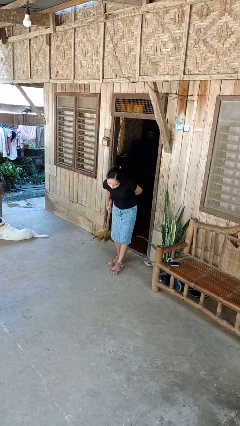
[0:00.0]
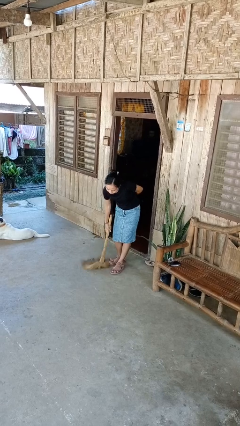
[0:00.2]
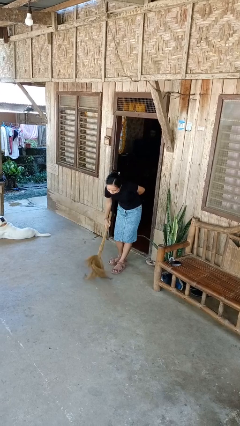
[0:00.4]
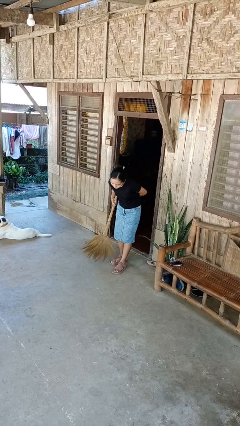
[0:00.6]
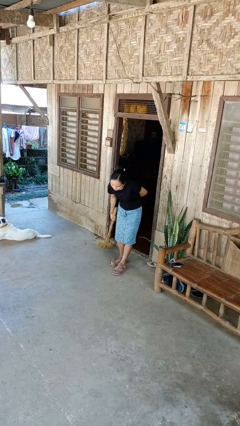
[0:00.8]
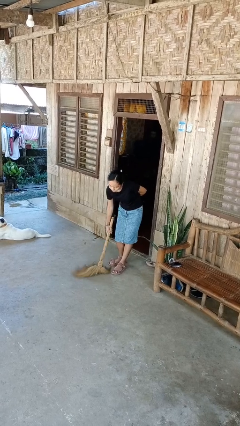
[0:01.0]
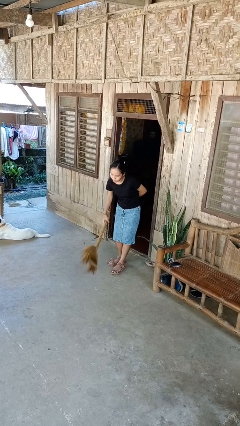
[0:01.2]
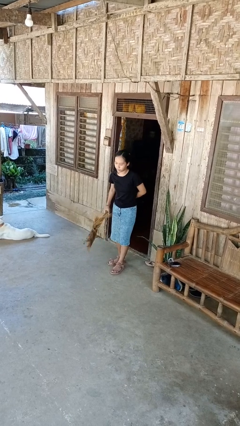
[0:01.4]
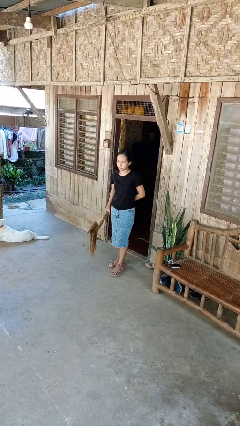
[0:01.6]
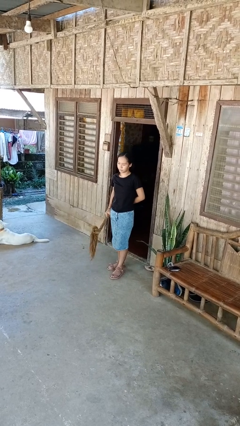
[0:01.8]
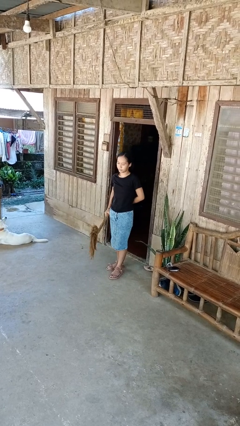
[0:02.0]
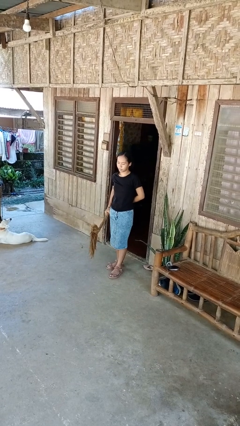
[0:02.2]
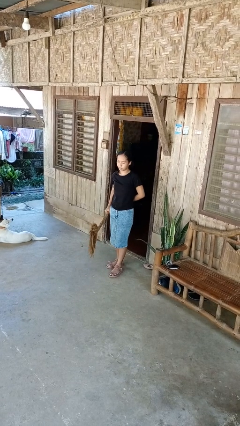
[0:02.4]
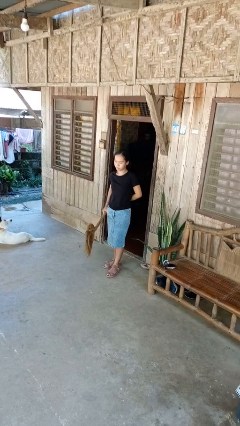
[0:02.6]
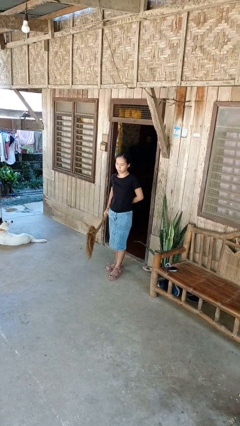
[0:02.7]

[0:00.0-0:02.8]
person sweeps floor

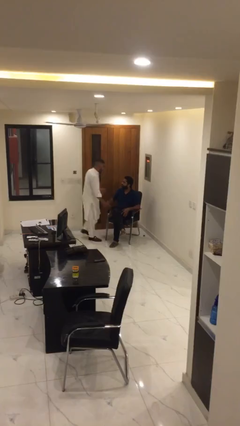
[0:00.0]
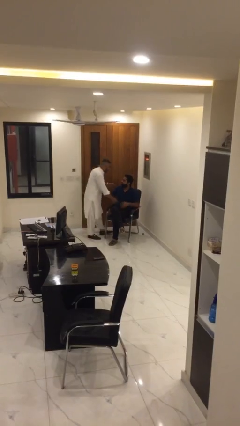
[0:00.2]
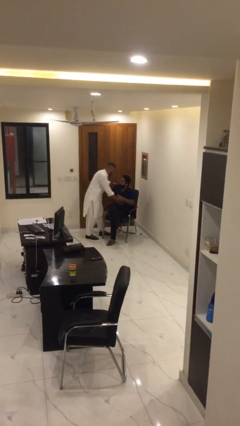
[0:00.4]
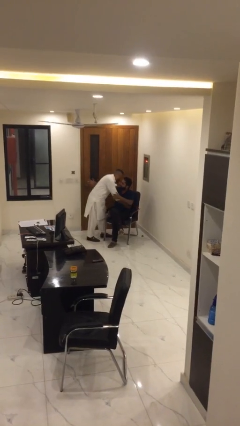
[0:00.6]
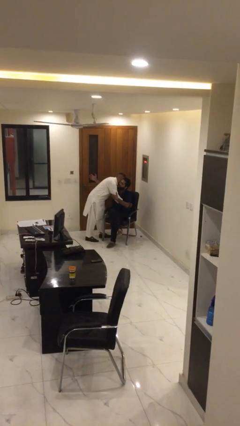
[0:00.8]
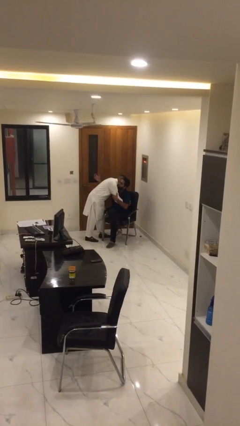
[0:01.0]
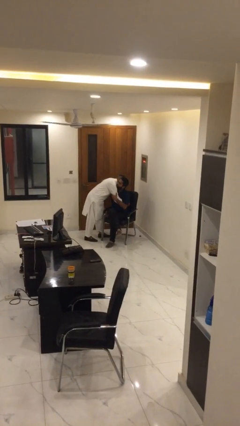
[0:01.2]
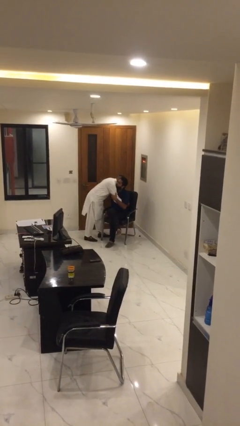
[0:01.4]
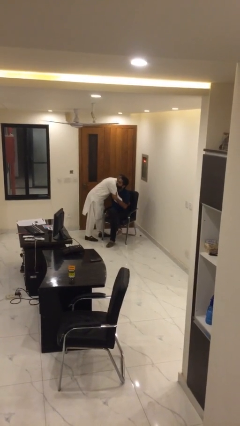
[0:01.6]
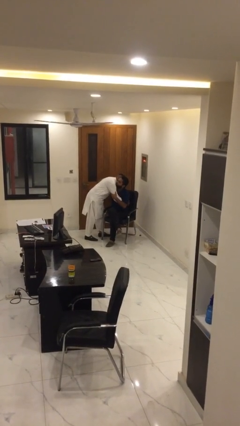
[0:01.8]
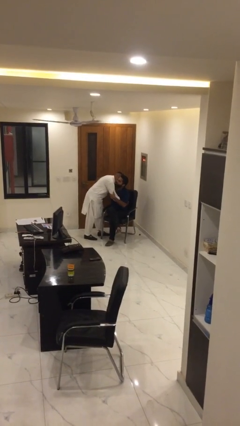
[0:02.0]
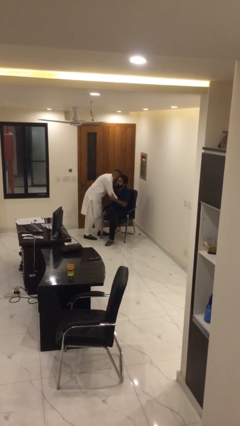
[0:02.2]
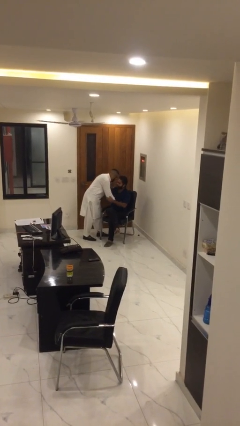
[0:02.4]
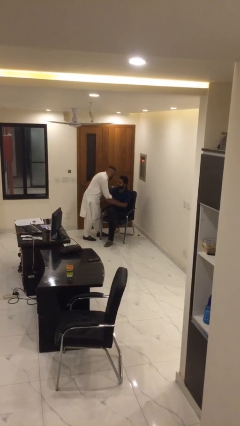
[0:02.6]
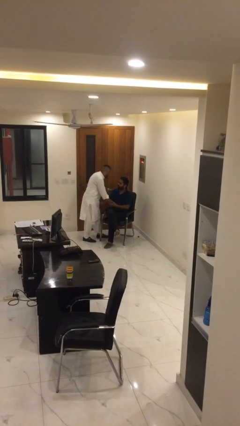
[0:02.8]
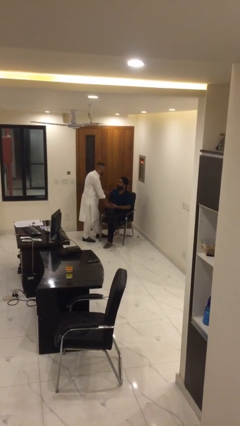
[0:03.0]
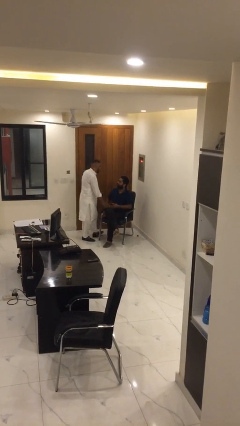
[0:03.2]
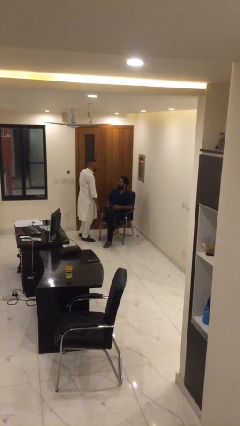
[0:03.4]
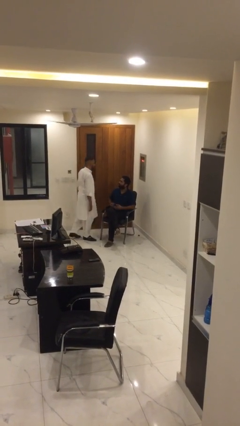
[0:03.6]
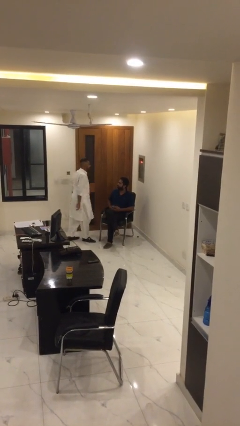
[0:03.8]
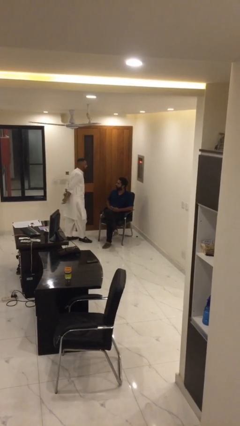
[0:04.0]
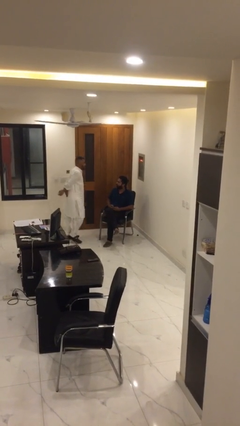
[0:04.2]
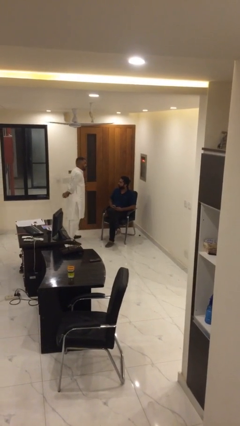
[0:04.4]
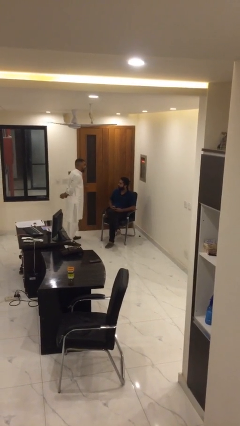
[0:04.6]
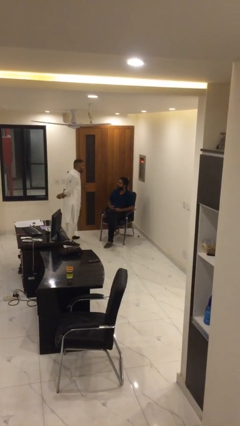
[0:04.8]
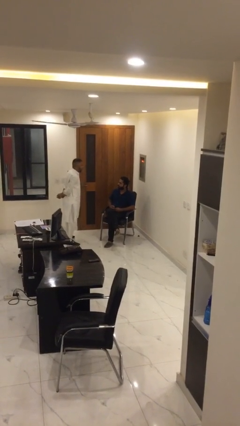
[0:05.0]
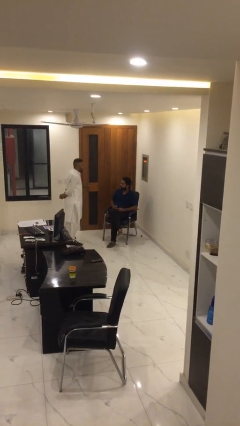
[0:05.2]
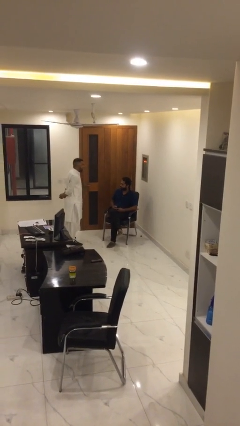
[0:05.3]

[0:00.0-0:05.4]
person embraces person

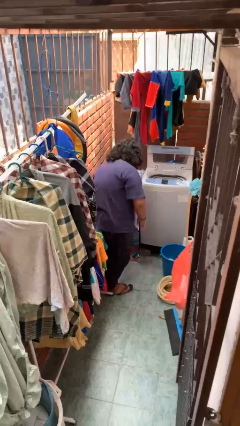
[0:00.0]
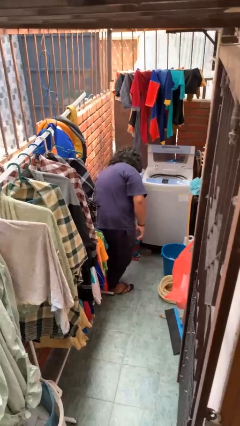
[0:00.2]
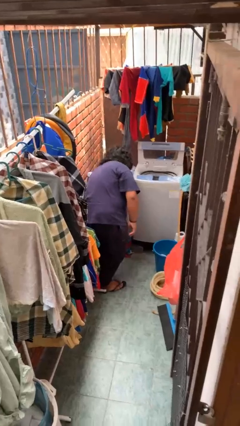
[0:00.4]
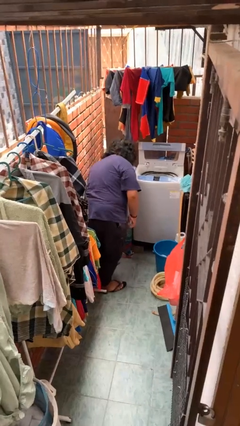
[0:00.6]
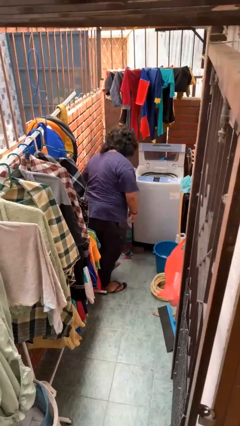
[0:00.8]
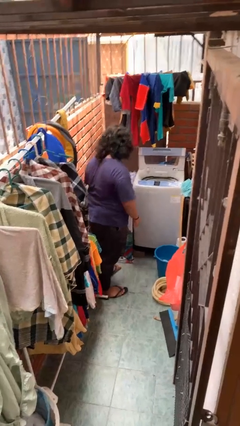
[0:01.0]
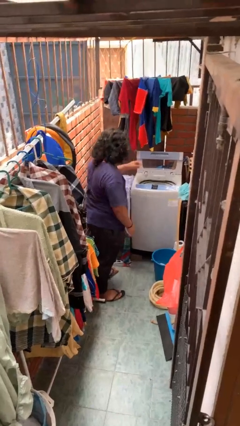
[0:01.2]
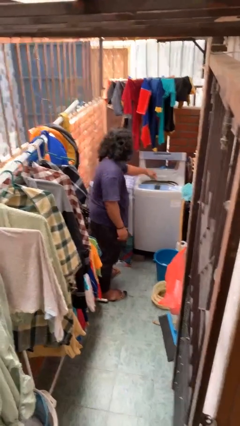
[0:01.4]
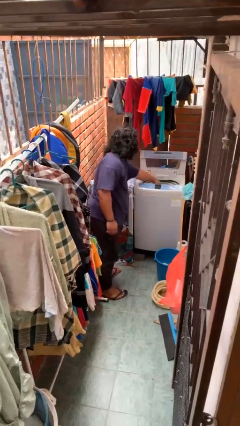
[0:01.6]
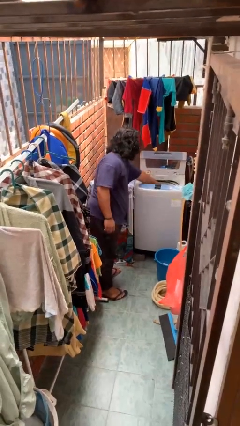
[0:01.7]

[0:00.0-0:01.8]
person loads dryer

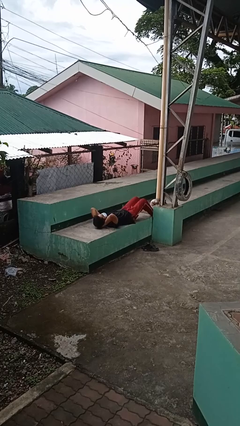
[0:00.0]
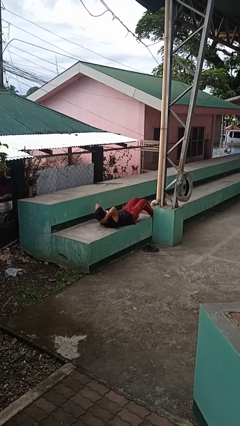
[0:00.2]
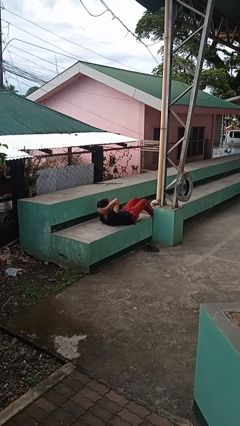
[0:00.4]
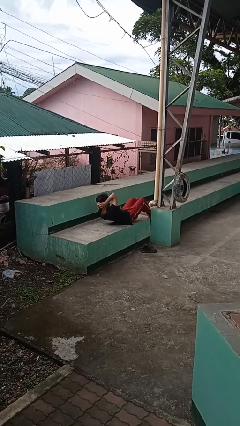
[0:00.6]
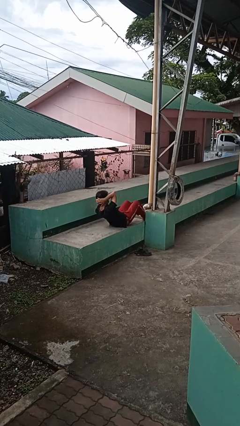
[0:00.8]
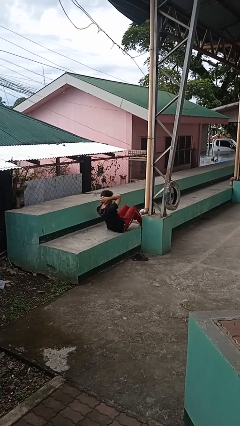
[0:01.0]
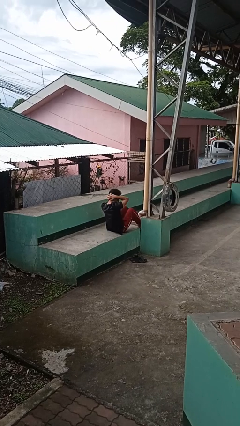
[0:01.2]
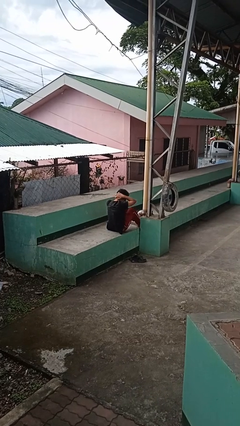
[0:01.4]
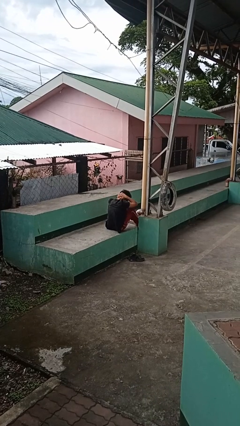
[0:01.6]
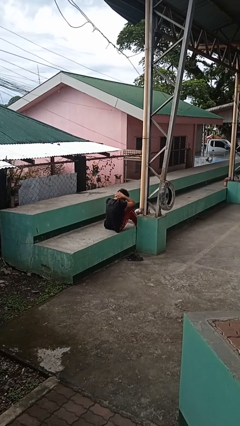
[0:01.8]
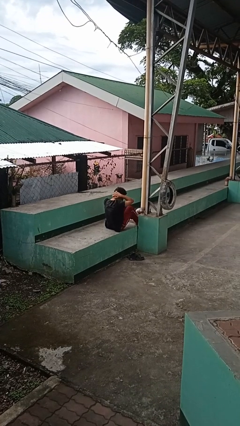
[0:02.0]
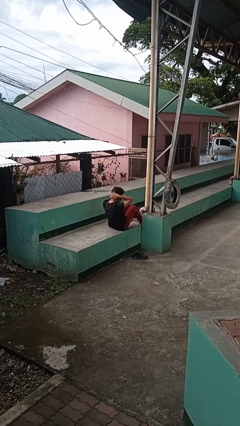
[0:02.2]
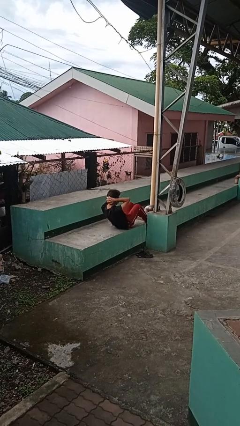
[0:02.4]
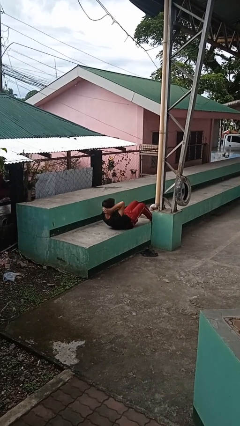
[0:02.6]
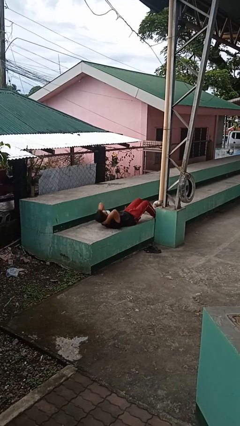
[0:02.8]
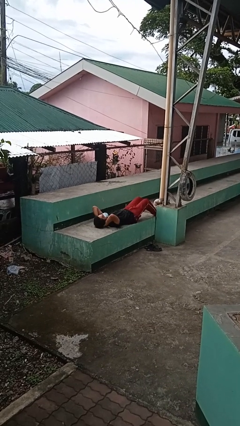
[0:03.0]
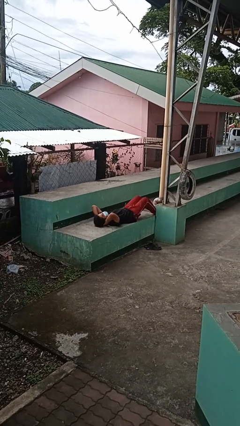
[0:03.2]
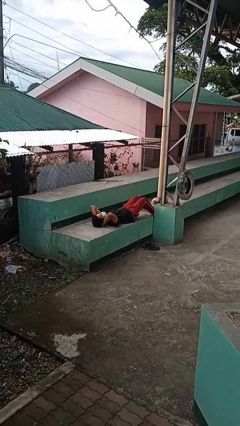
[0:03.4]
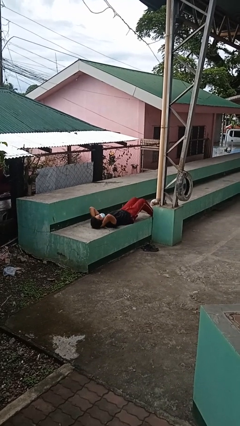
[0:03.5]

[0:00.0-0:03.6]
person exercises with situp

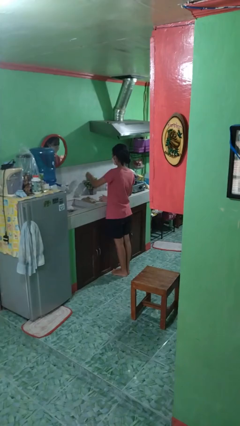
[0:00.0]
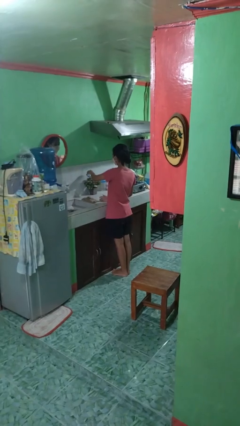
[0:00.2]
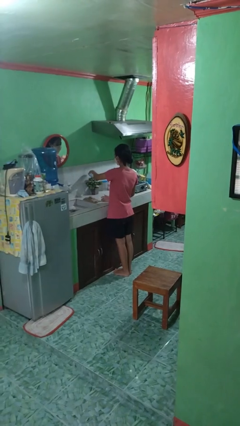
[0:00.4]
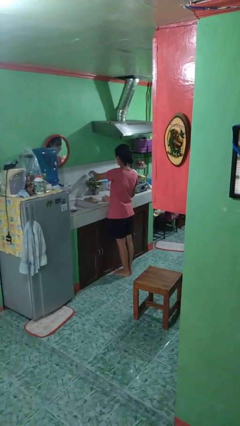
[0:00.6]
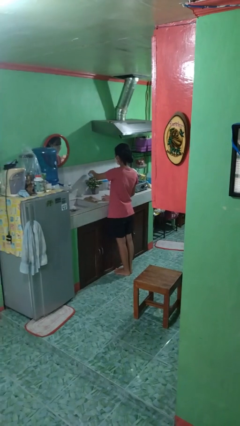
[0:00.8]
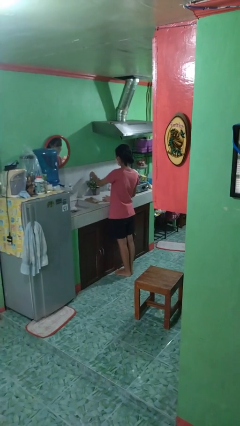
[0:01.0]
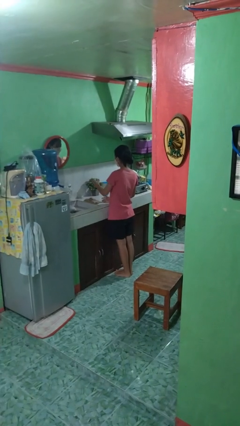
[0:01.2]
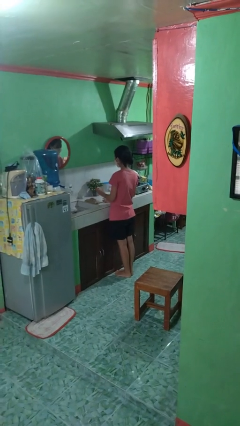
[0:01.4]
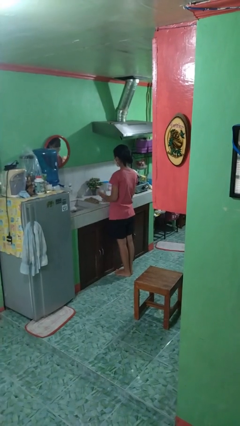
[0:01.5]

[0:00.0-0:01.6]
person waters houseplant

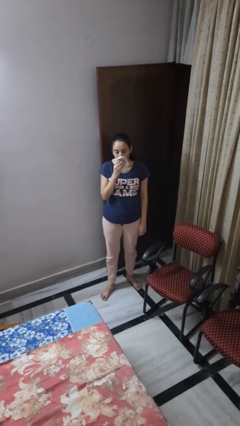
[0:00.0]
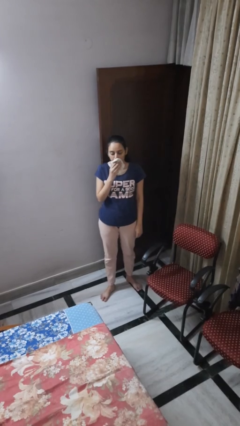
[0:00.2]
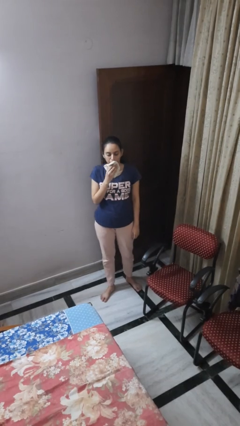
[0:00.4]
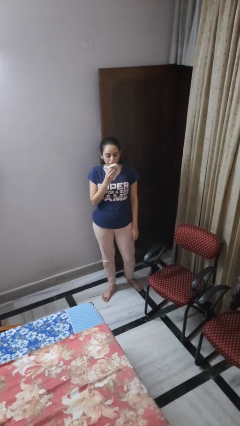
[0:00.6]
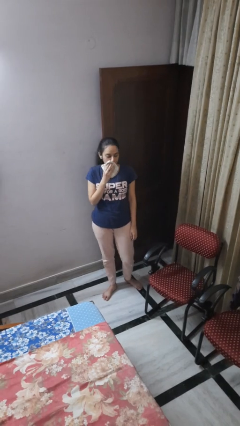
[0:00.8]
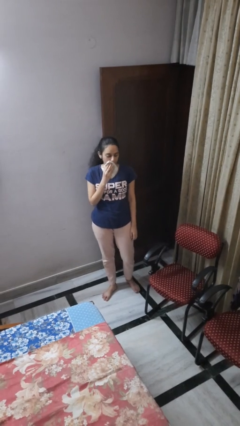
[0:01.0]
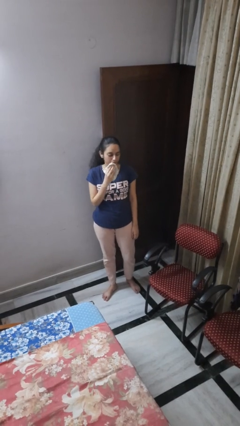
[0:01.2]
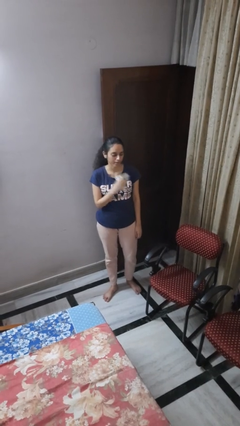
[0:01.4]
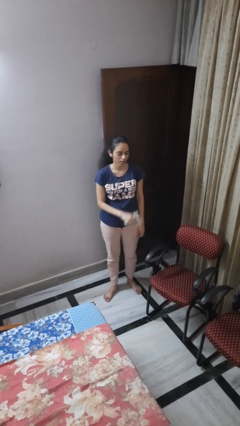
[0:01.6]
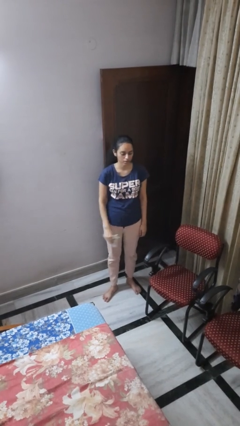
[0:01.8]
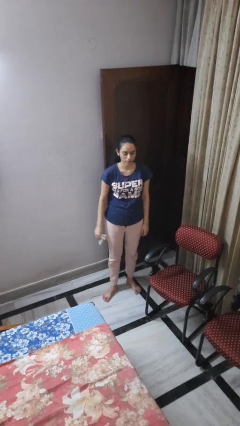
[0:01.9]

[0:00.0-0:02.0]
person wipes mouth with napkin
